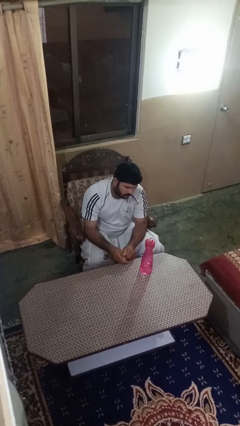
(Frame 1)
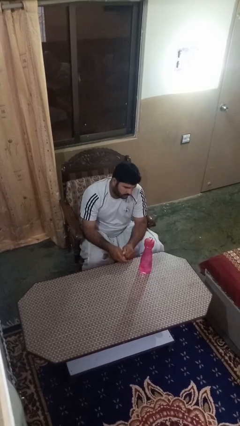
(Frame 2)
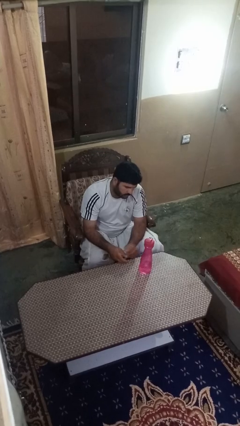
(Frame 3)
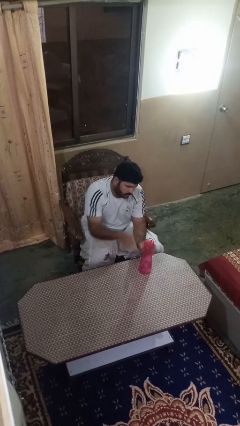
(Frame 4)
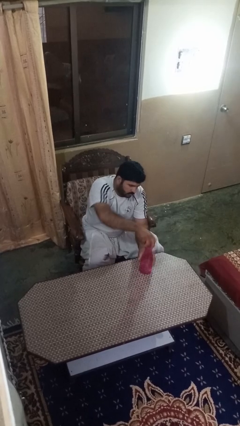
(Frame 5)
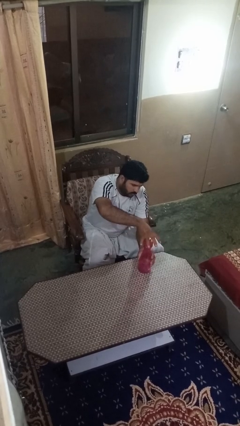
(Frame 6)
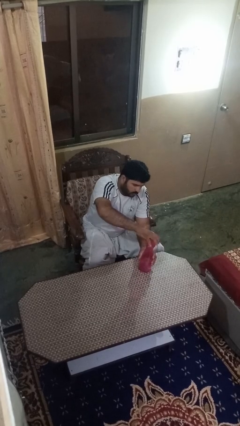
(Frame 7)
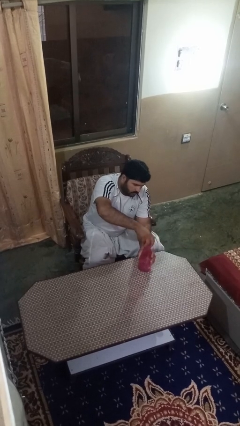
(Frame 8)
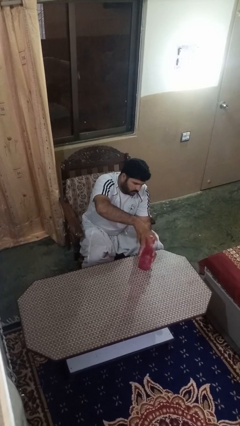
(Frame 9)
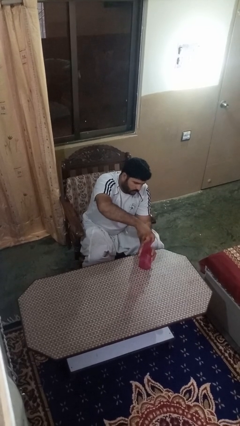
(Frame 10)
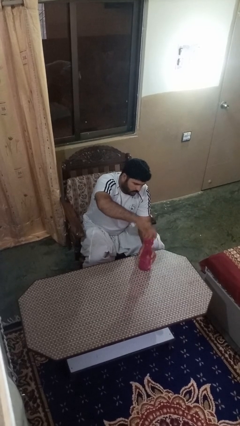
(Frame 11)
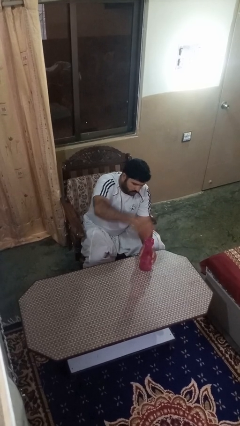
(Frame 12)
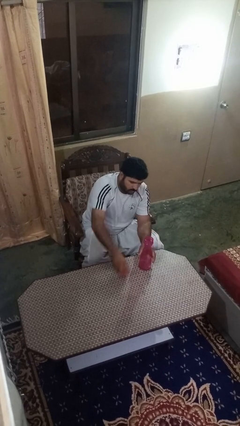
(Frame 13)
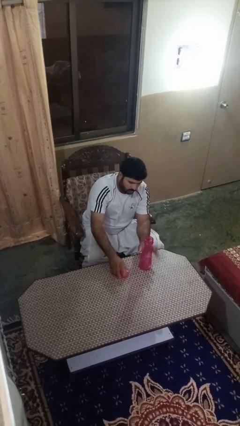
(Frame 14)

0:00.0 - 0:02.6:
person unscrews lid from bottle

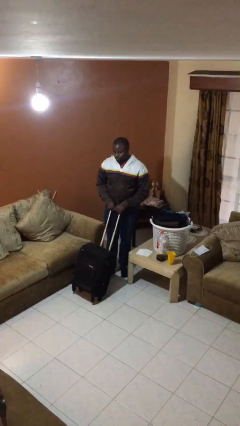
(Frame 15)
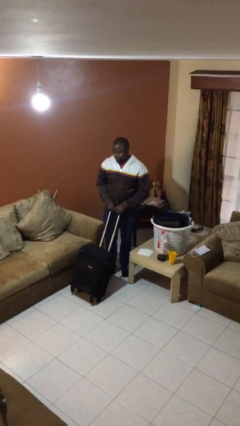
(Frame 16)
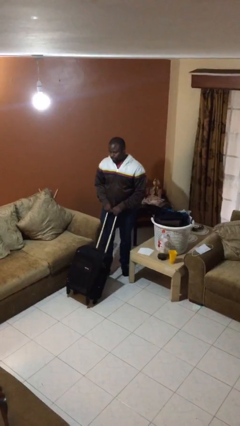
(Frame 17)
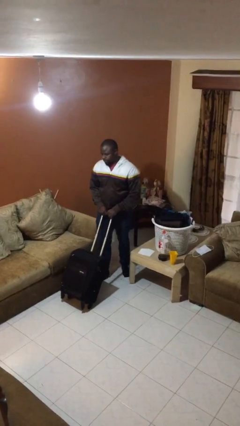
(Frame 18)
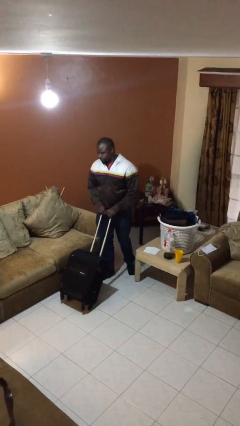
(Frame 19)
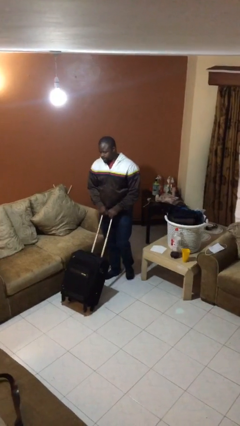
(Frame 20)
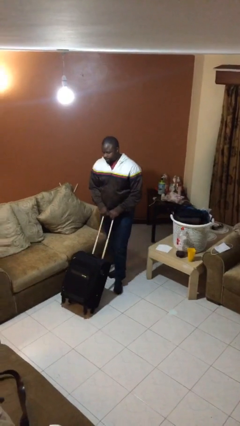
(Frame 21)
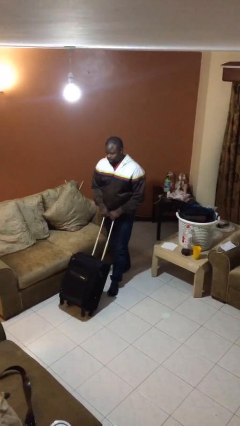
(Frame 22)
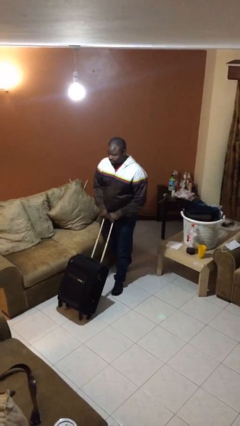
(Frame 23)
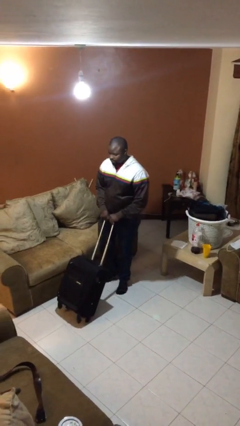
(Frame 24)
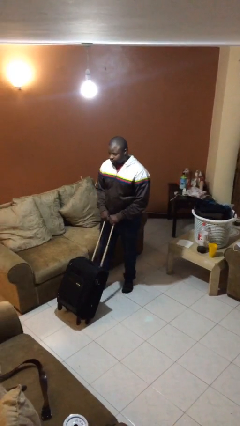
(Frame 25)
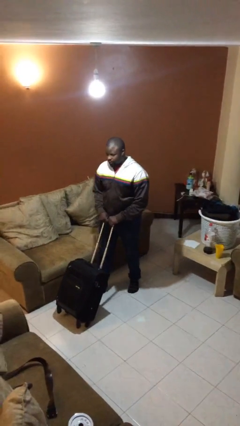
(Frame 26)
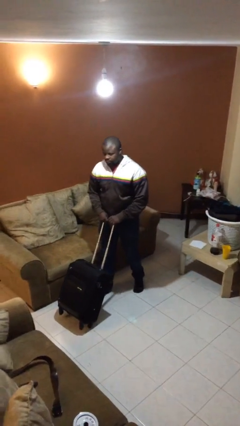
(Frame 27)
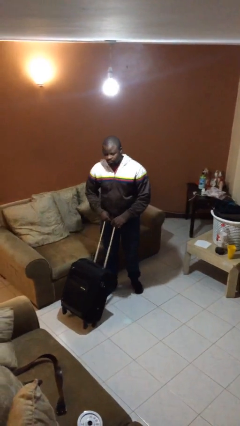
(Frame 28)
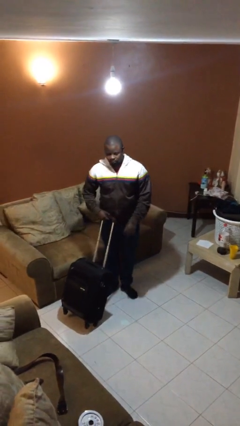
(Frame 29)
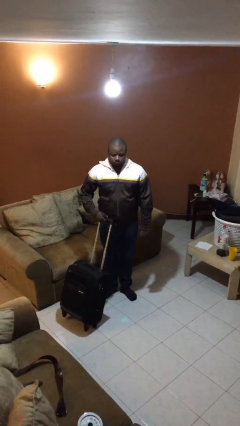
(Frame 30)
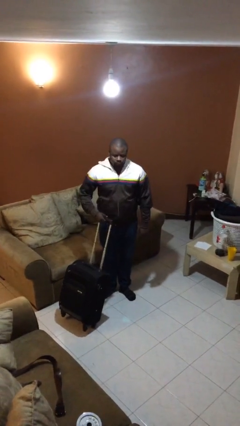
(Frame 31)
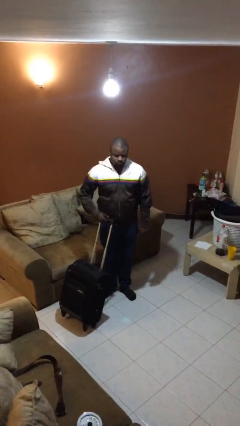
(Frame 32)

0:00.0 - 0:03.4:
person pushes wheeled cart

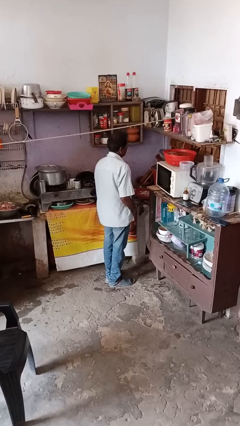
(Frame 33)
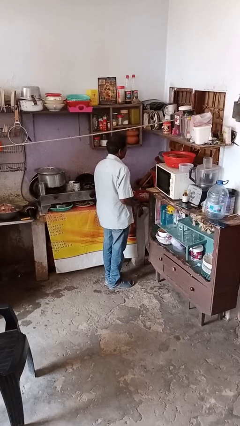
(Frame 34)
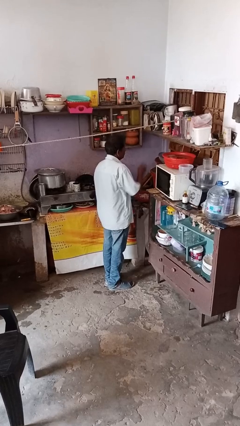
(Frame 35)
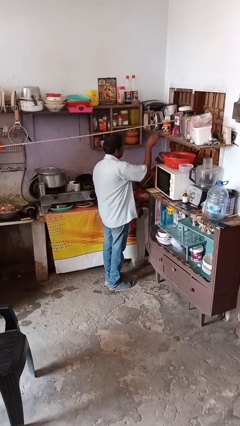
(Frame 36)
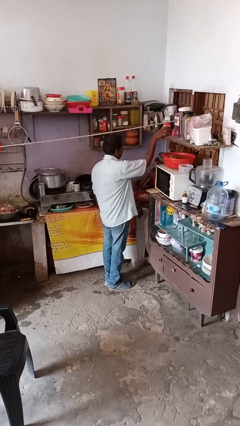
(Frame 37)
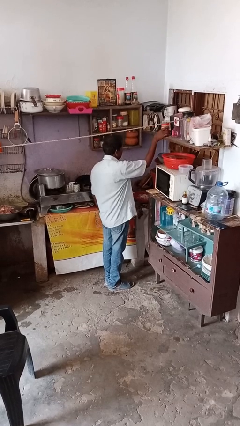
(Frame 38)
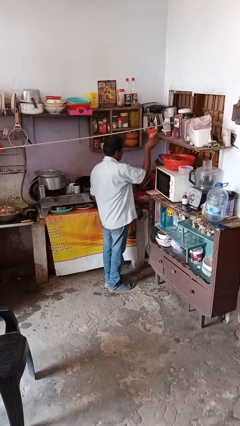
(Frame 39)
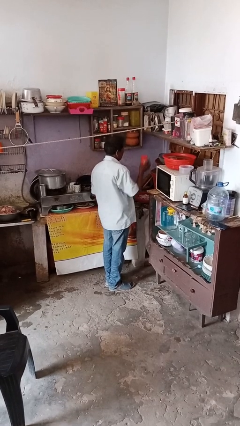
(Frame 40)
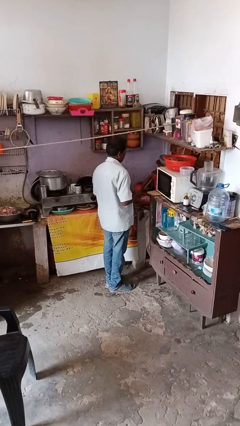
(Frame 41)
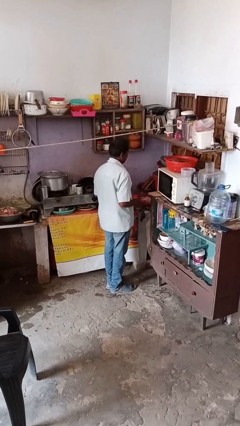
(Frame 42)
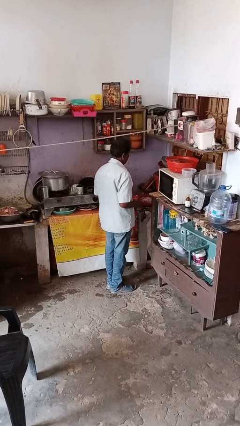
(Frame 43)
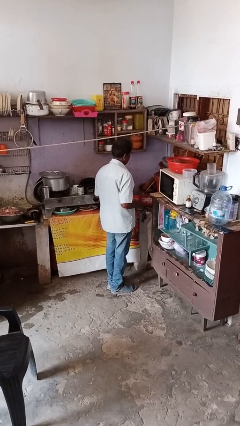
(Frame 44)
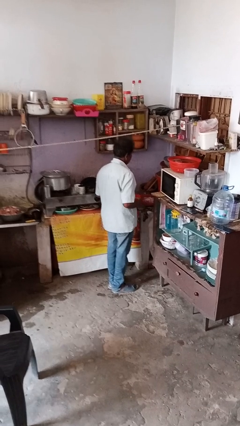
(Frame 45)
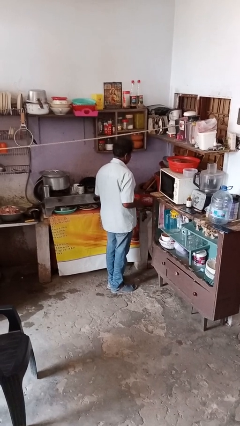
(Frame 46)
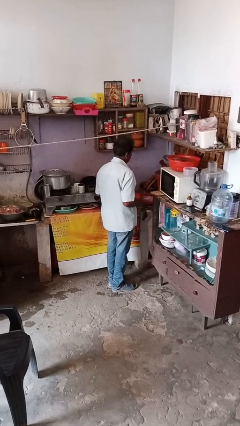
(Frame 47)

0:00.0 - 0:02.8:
person picks up object from shelf

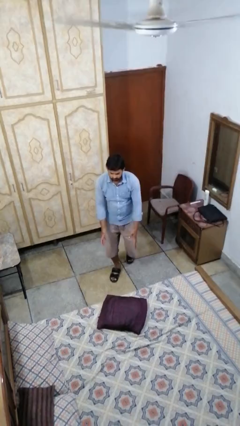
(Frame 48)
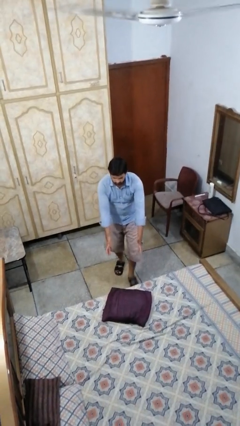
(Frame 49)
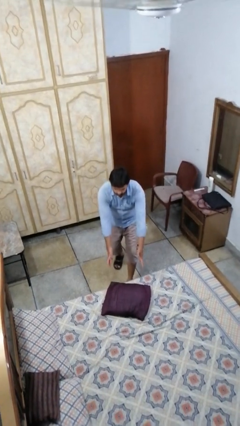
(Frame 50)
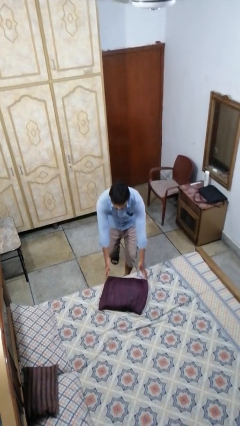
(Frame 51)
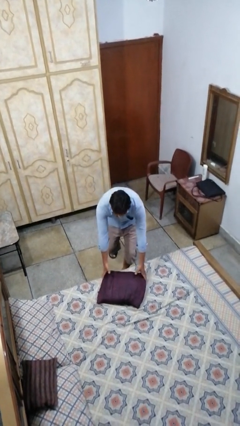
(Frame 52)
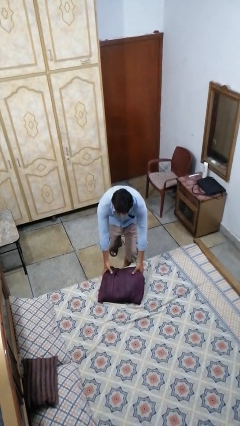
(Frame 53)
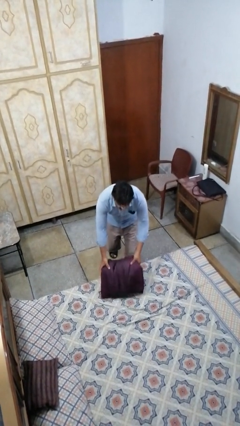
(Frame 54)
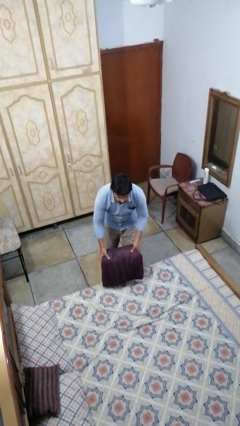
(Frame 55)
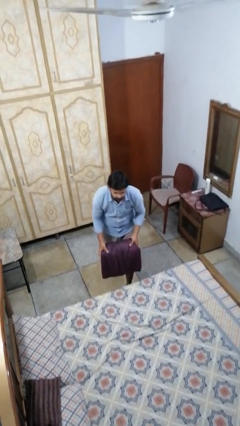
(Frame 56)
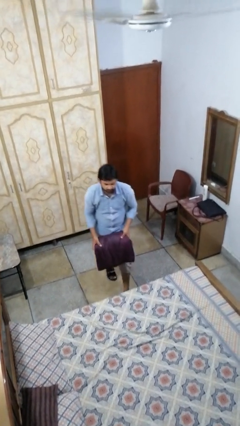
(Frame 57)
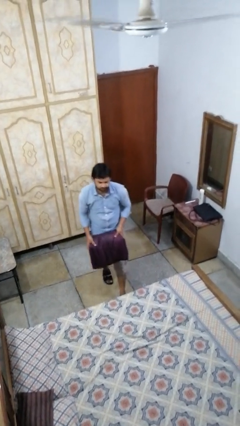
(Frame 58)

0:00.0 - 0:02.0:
person picks up object from bed

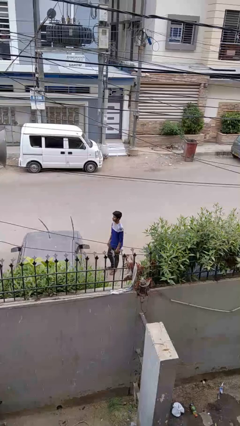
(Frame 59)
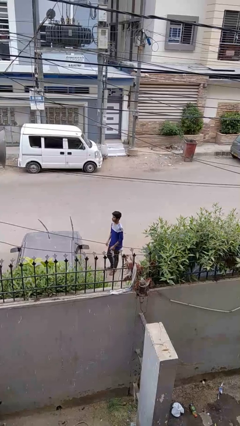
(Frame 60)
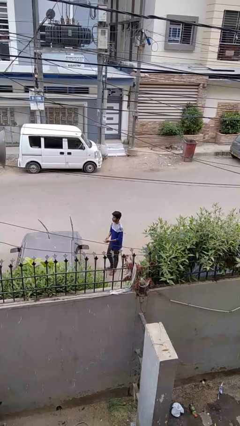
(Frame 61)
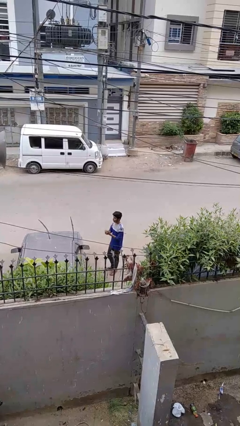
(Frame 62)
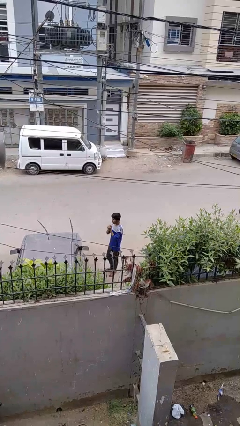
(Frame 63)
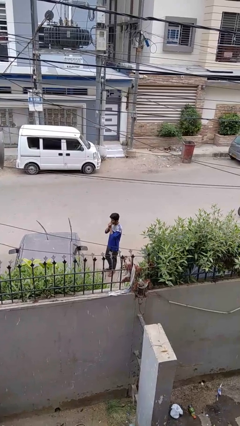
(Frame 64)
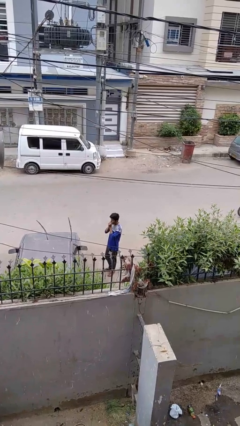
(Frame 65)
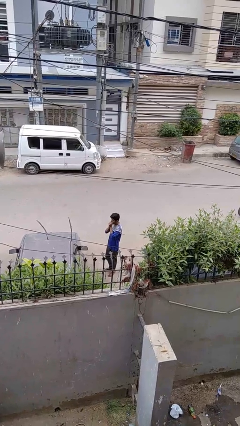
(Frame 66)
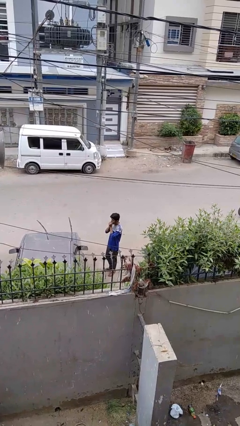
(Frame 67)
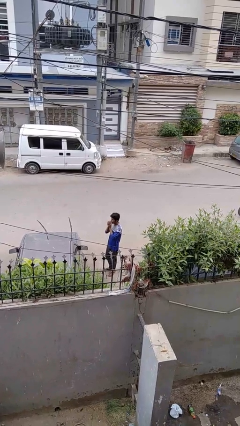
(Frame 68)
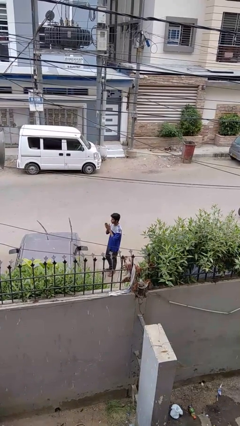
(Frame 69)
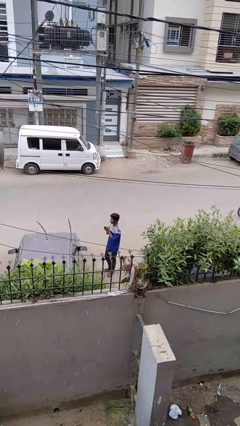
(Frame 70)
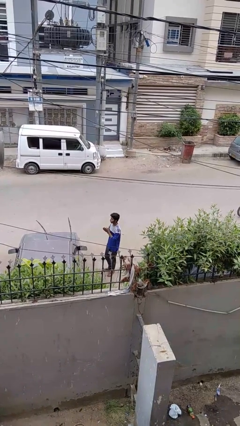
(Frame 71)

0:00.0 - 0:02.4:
person blows into hands

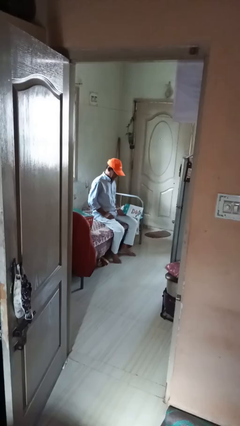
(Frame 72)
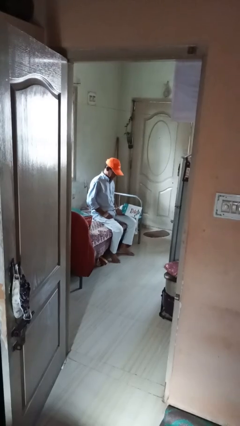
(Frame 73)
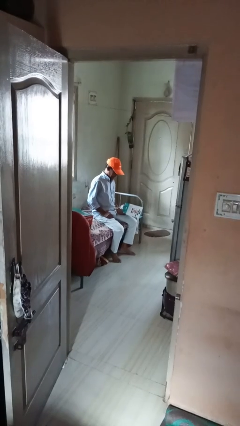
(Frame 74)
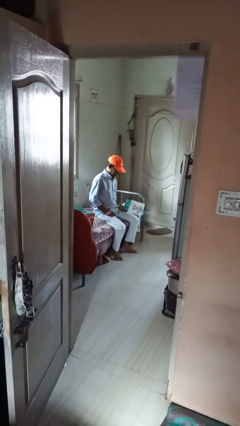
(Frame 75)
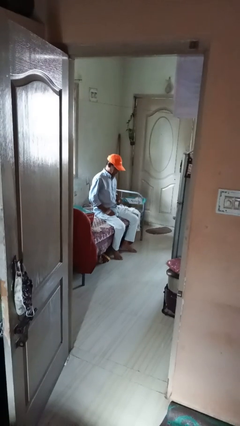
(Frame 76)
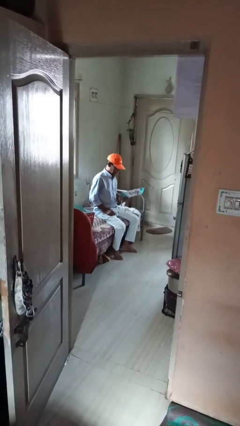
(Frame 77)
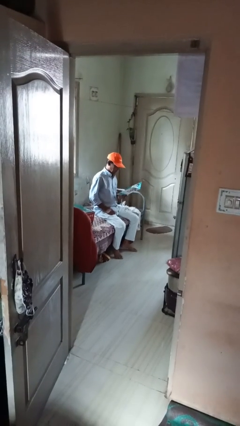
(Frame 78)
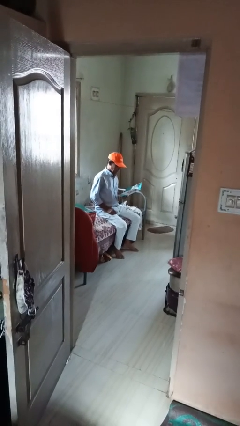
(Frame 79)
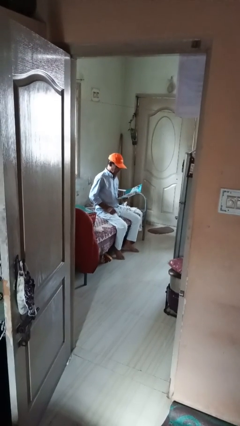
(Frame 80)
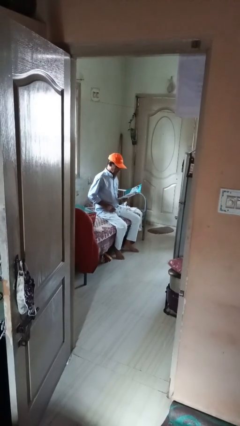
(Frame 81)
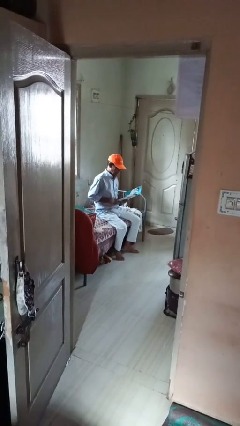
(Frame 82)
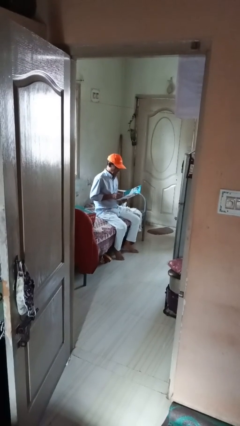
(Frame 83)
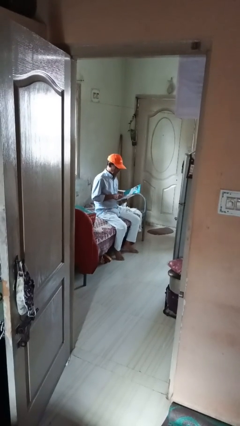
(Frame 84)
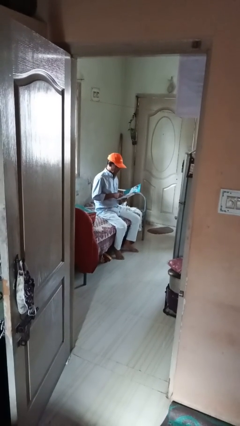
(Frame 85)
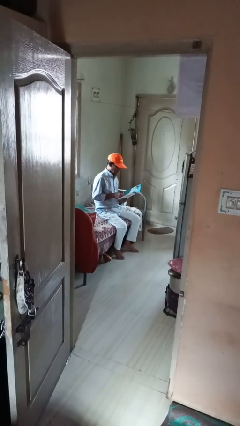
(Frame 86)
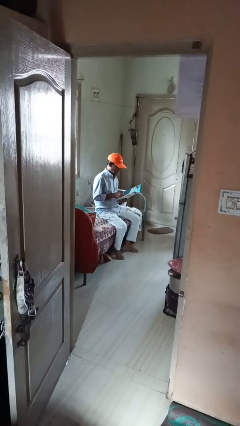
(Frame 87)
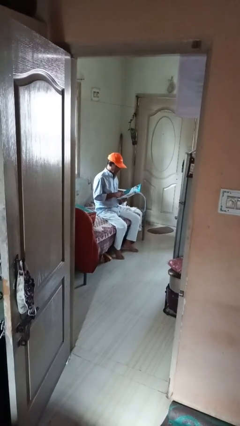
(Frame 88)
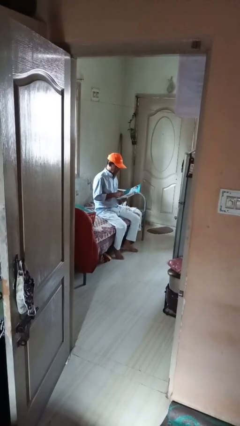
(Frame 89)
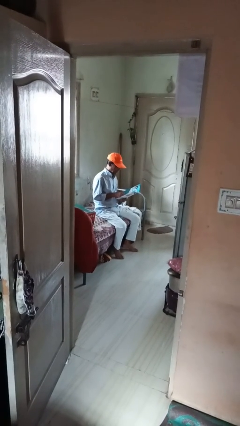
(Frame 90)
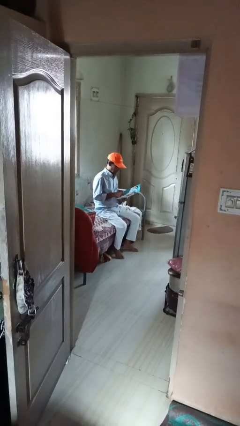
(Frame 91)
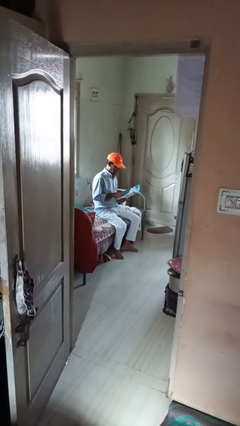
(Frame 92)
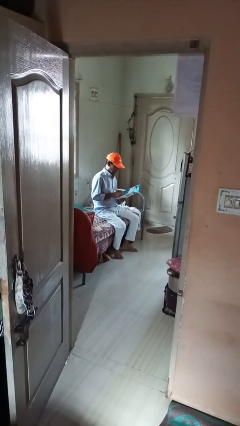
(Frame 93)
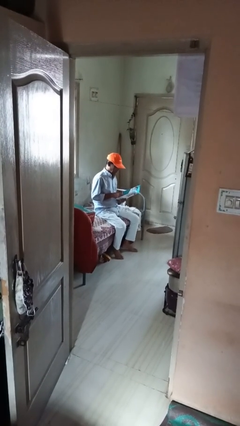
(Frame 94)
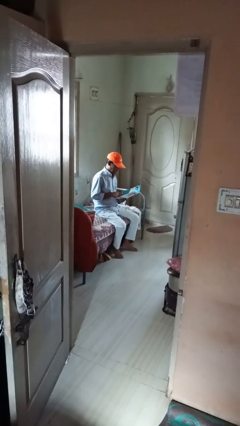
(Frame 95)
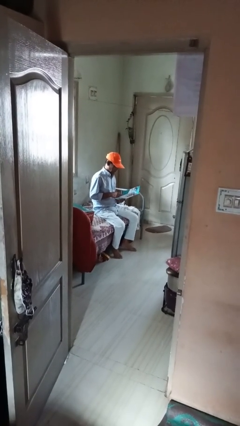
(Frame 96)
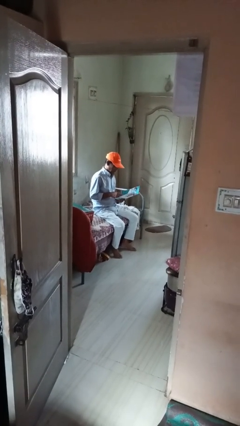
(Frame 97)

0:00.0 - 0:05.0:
person reads magazine
